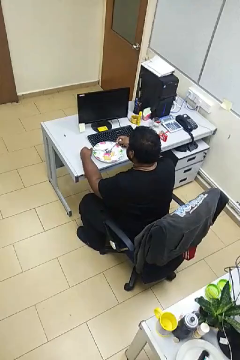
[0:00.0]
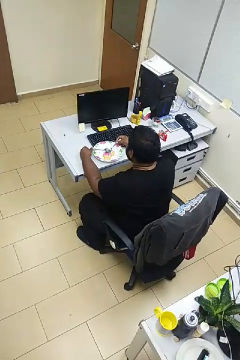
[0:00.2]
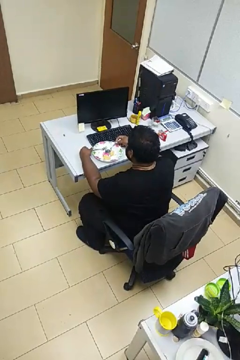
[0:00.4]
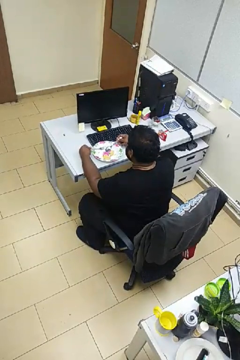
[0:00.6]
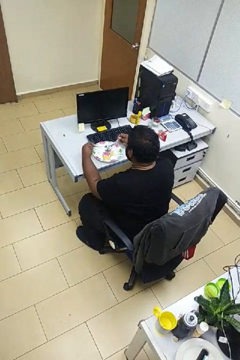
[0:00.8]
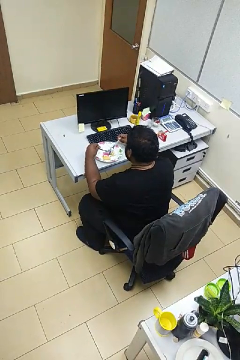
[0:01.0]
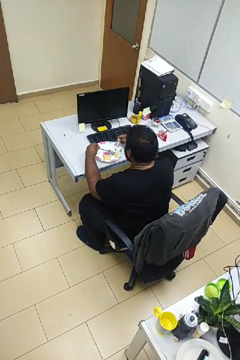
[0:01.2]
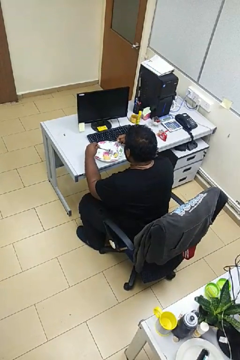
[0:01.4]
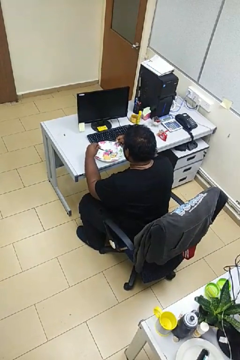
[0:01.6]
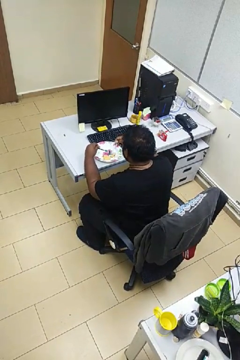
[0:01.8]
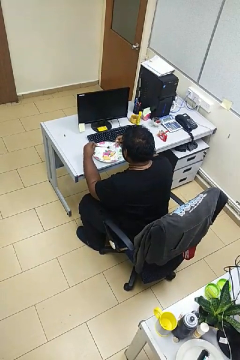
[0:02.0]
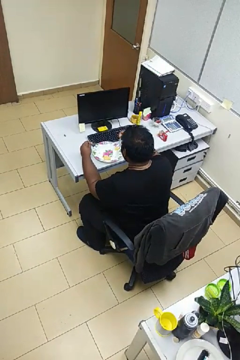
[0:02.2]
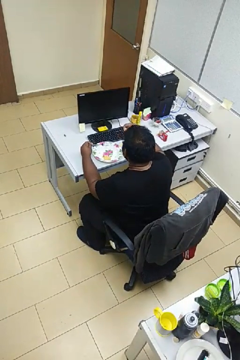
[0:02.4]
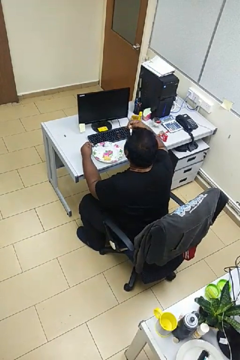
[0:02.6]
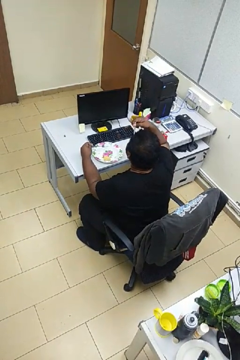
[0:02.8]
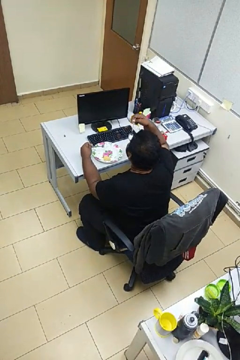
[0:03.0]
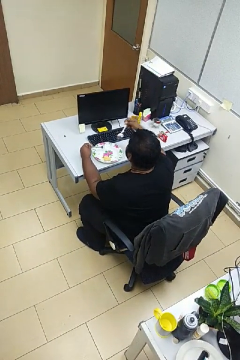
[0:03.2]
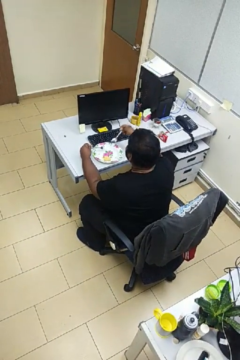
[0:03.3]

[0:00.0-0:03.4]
person eats with utensil

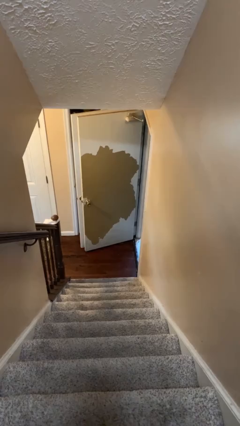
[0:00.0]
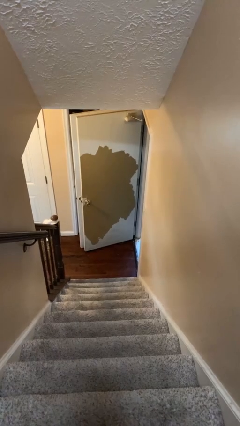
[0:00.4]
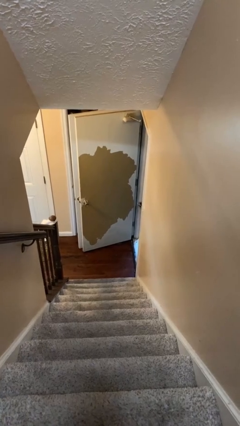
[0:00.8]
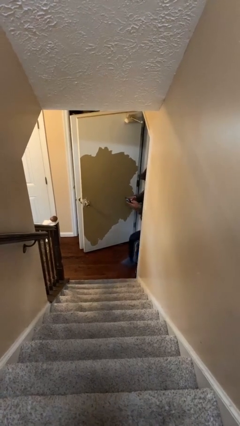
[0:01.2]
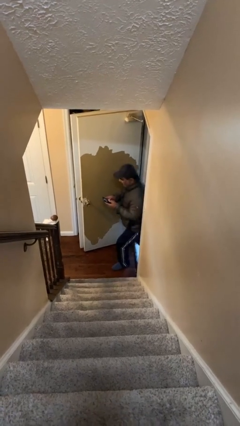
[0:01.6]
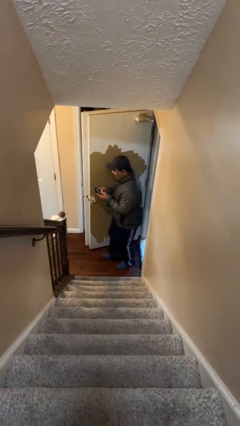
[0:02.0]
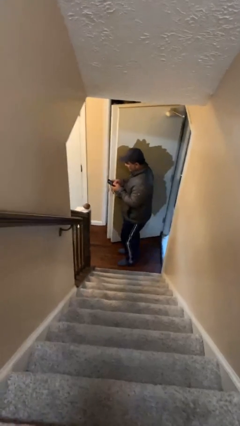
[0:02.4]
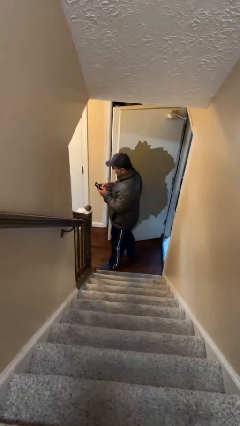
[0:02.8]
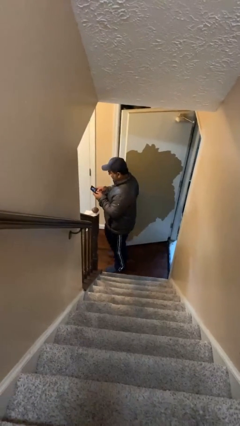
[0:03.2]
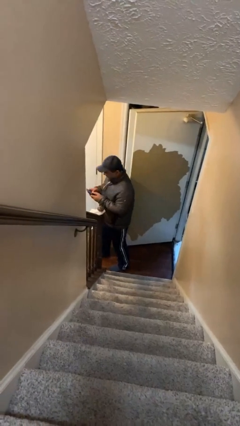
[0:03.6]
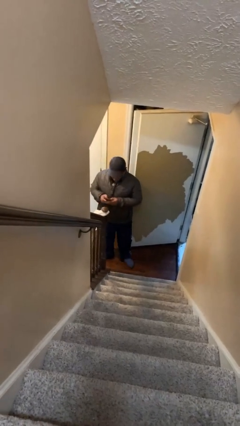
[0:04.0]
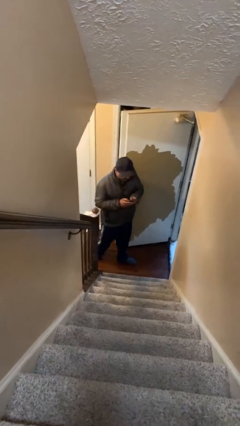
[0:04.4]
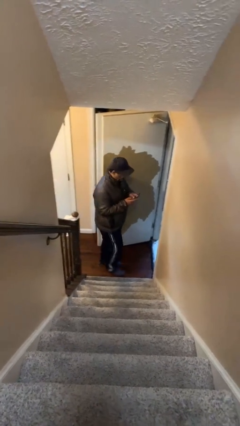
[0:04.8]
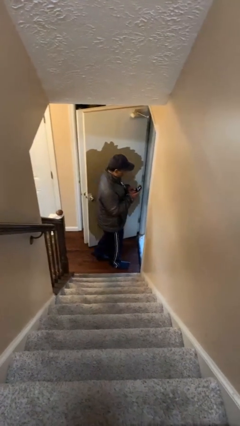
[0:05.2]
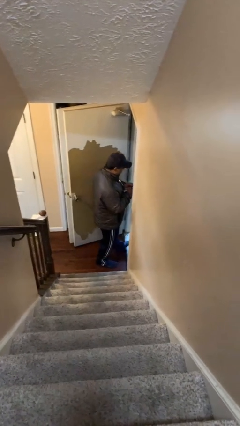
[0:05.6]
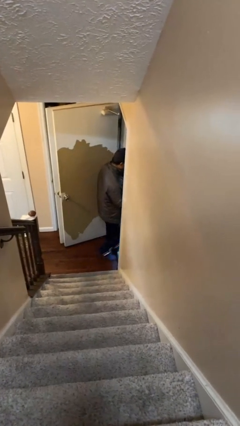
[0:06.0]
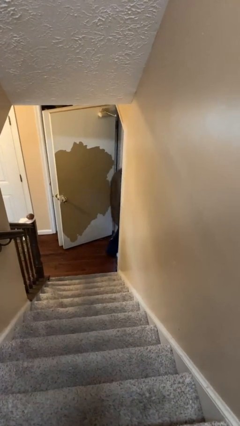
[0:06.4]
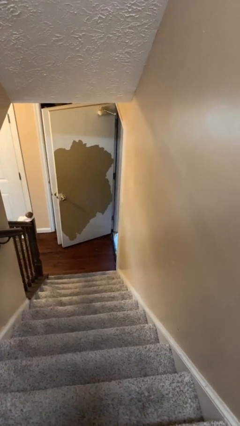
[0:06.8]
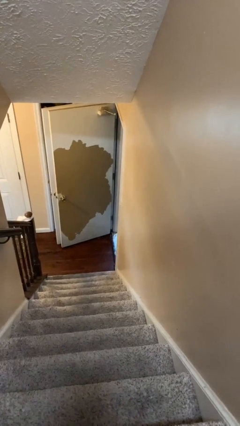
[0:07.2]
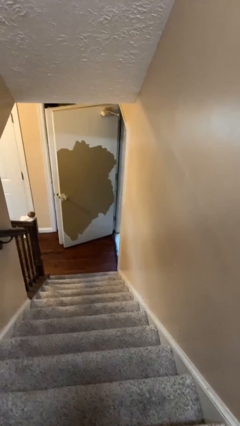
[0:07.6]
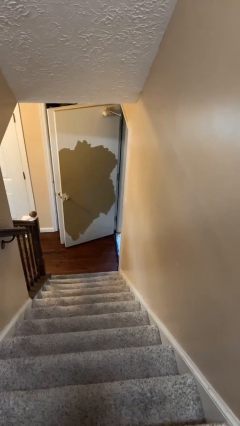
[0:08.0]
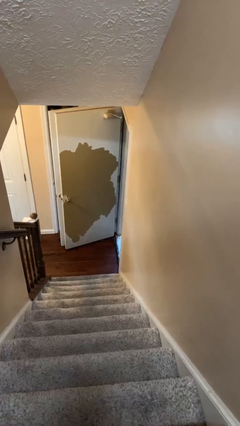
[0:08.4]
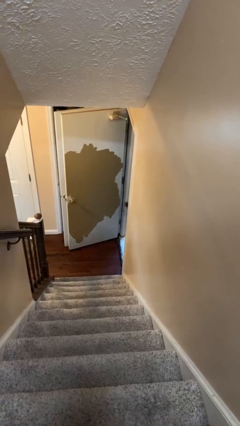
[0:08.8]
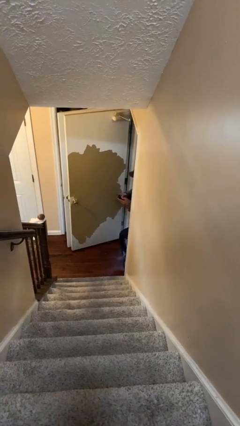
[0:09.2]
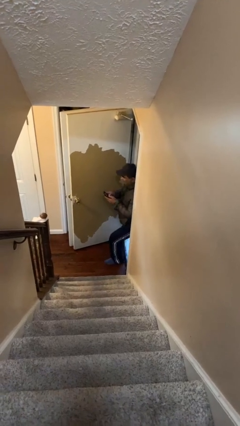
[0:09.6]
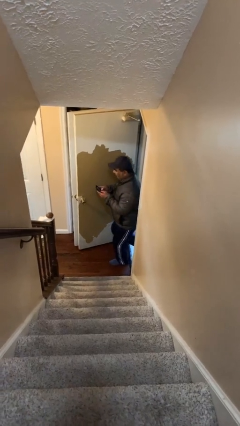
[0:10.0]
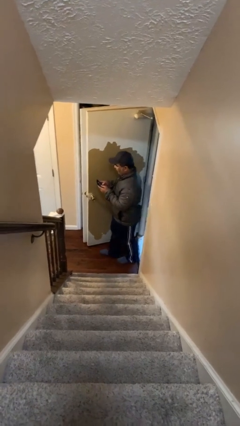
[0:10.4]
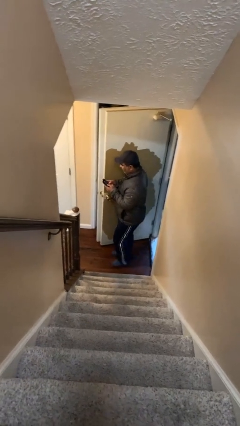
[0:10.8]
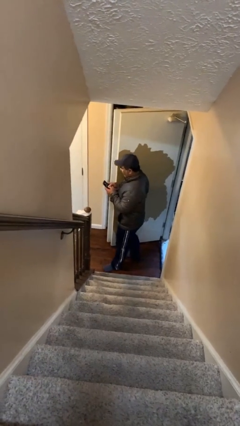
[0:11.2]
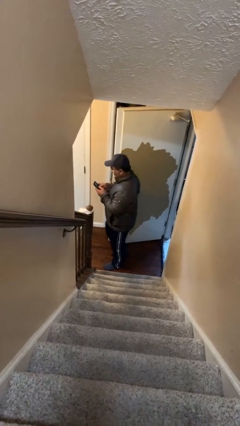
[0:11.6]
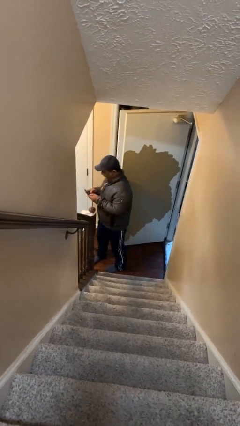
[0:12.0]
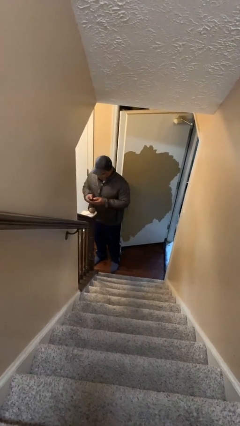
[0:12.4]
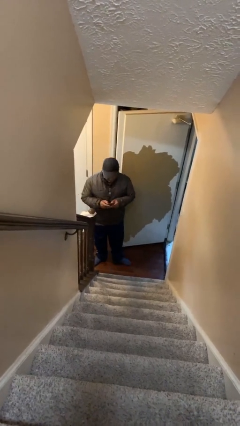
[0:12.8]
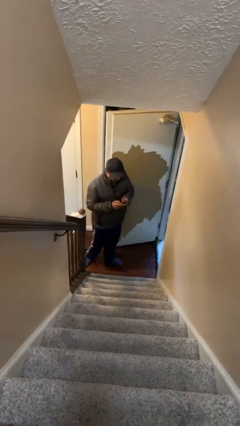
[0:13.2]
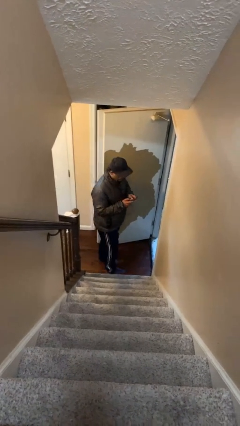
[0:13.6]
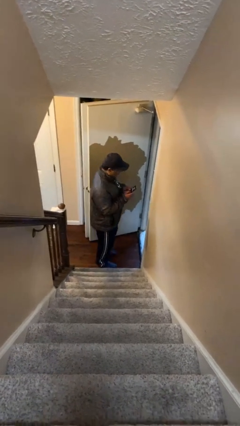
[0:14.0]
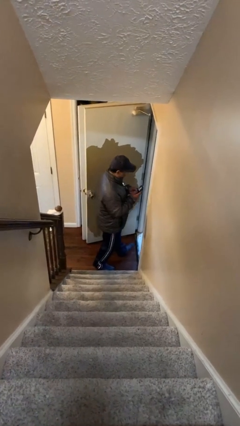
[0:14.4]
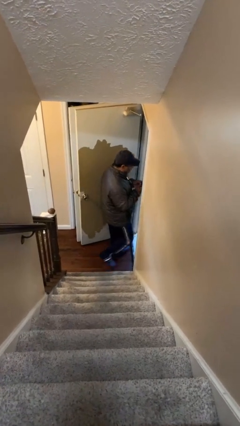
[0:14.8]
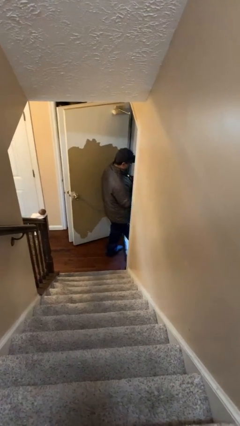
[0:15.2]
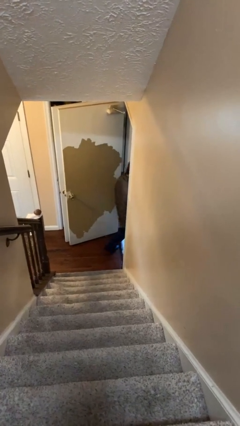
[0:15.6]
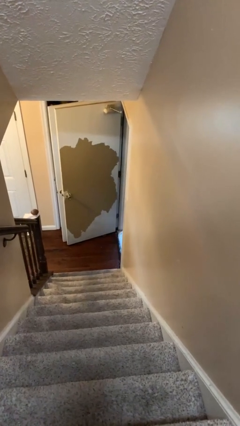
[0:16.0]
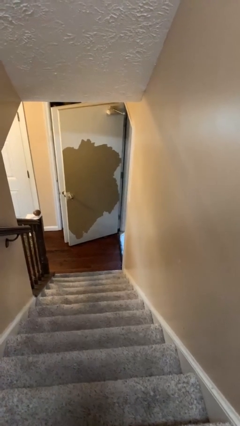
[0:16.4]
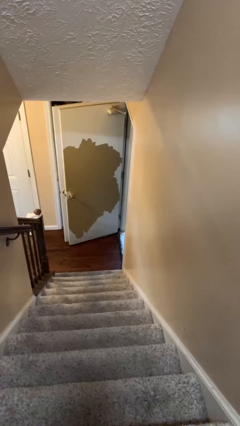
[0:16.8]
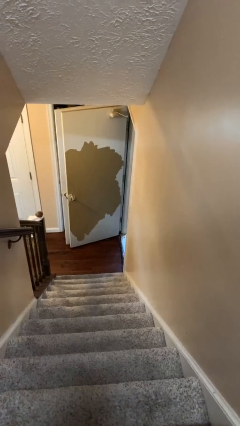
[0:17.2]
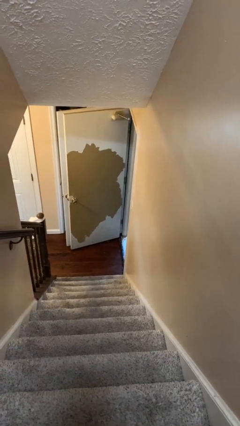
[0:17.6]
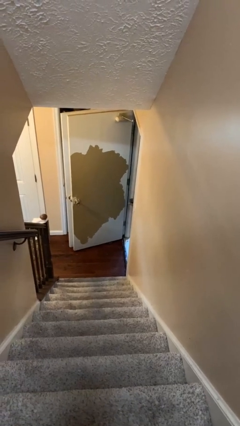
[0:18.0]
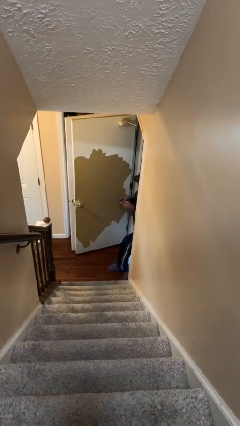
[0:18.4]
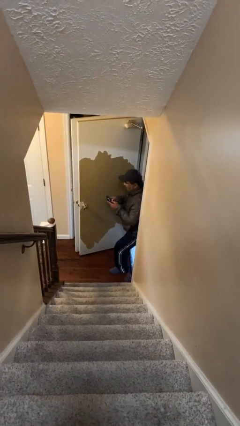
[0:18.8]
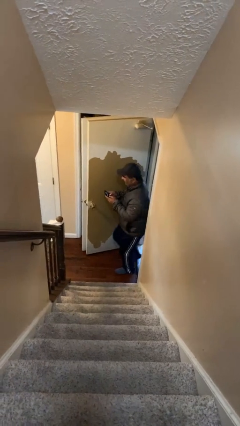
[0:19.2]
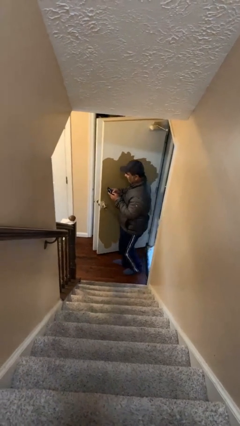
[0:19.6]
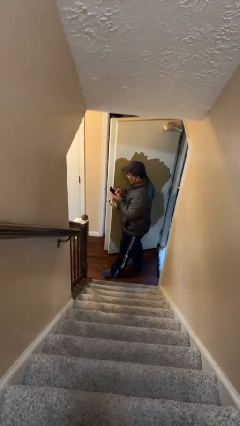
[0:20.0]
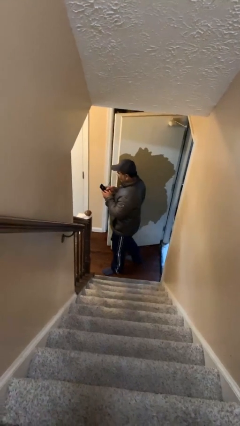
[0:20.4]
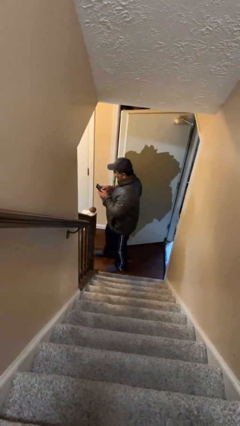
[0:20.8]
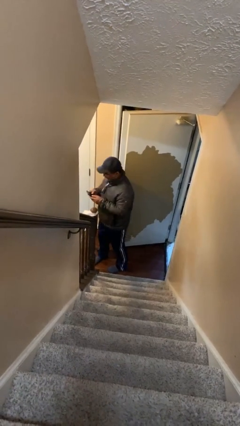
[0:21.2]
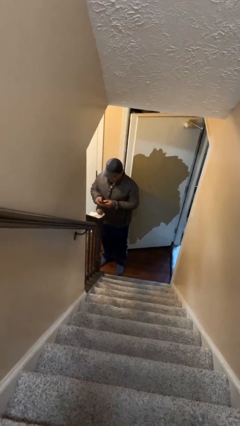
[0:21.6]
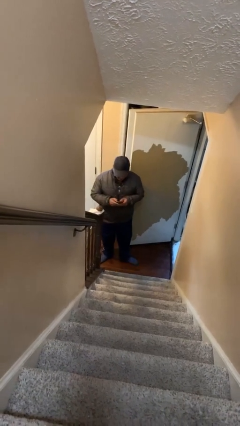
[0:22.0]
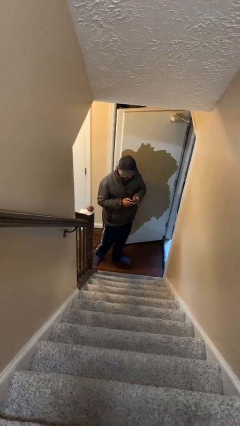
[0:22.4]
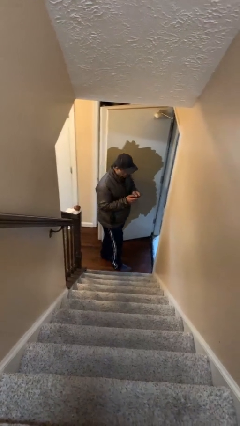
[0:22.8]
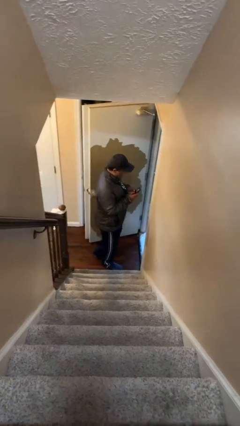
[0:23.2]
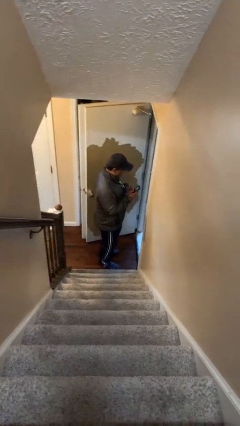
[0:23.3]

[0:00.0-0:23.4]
person texts on phone

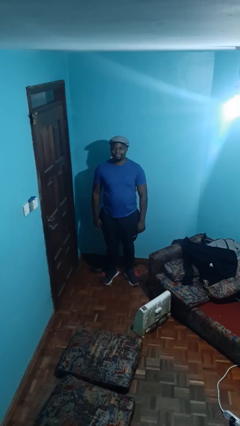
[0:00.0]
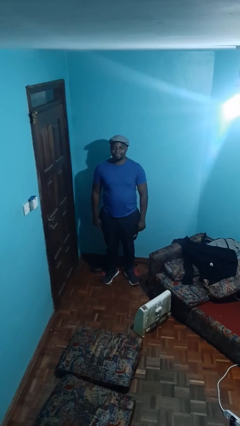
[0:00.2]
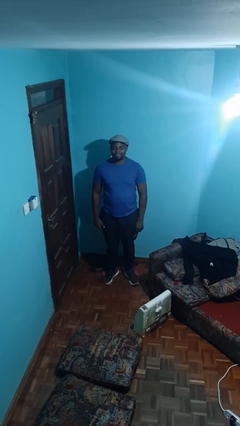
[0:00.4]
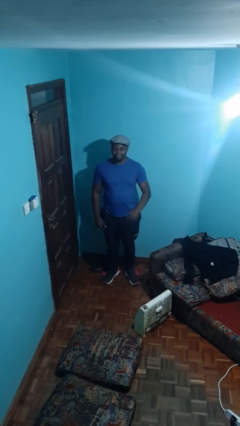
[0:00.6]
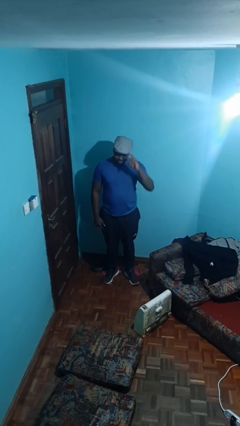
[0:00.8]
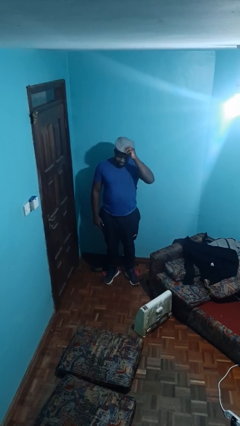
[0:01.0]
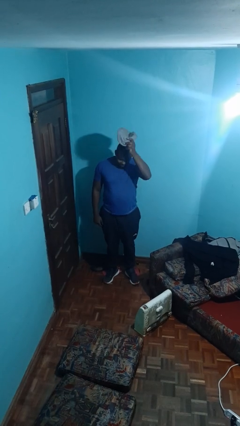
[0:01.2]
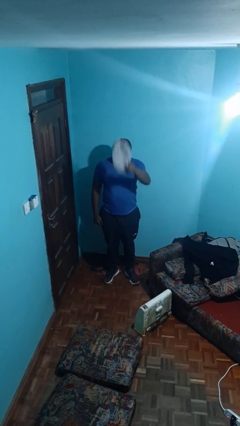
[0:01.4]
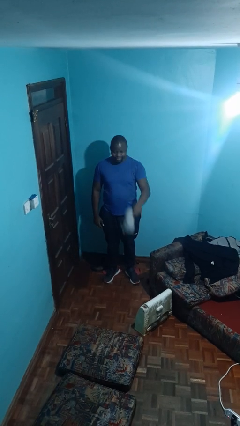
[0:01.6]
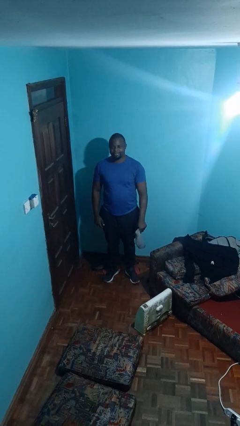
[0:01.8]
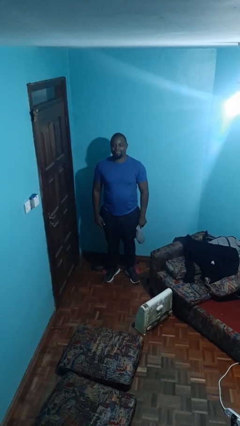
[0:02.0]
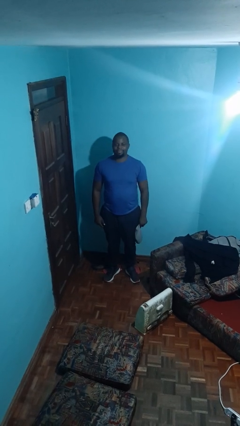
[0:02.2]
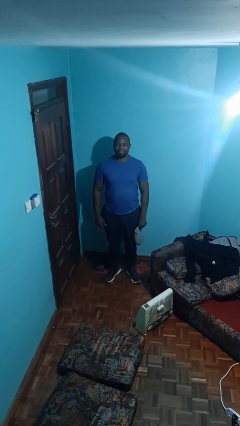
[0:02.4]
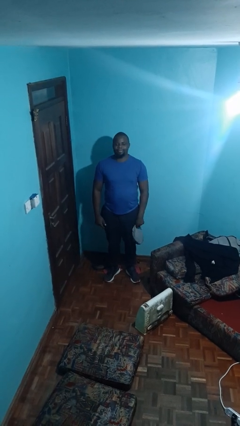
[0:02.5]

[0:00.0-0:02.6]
person takes off hat

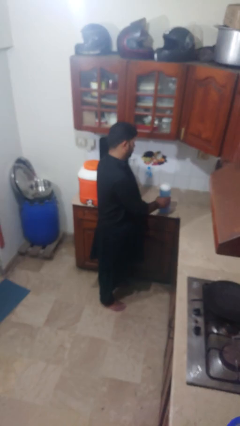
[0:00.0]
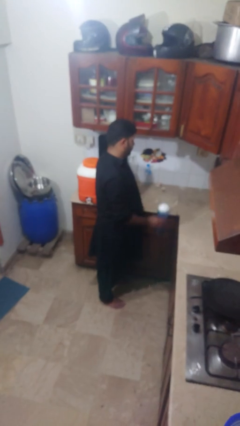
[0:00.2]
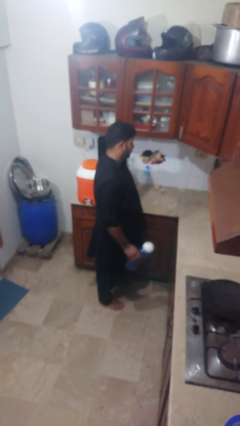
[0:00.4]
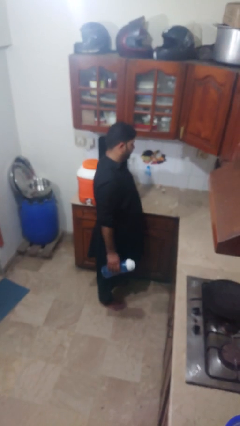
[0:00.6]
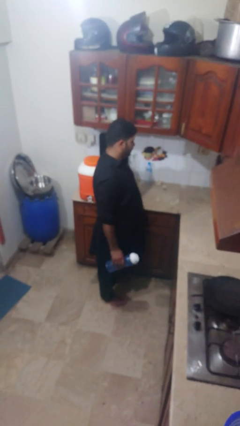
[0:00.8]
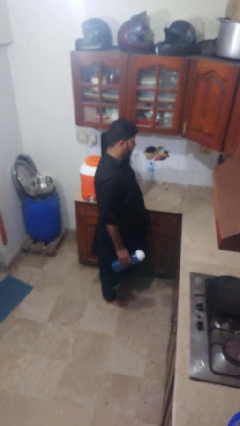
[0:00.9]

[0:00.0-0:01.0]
person picks up object from countertop
